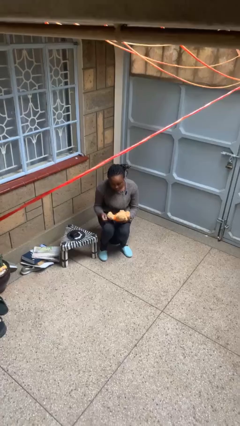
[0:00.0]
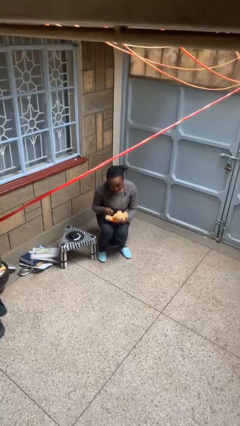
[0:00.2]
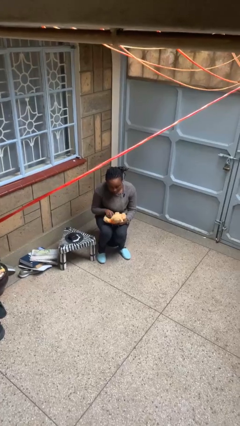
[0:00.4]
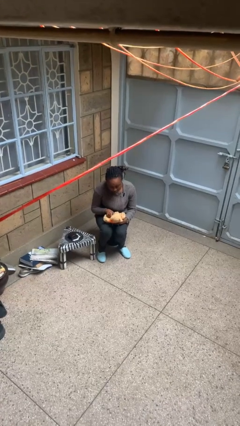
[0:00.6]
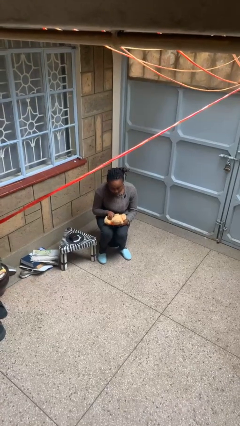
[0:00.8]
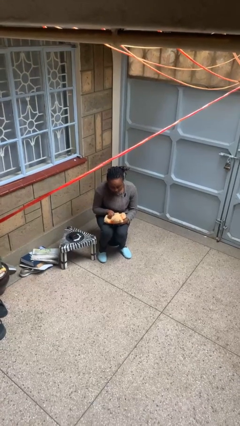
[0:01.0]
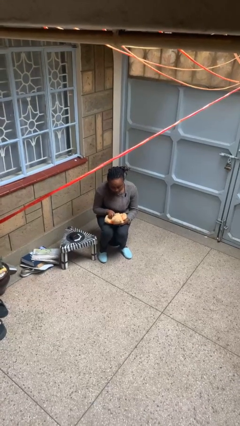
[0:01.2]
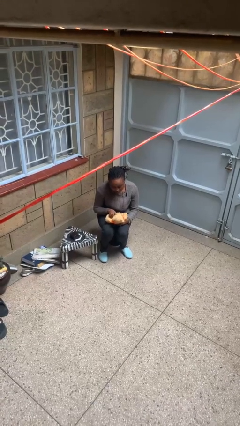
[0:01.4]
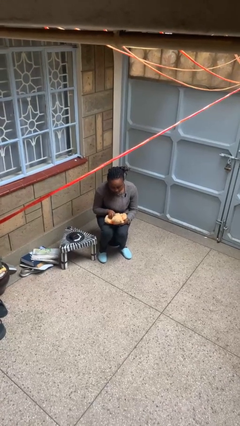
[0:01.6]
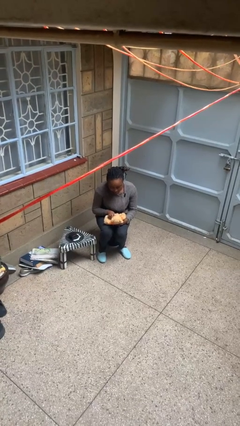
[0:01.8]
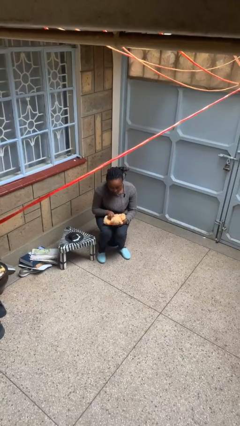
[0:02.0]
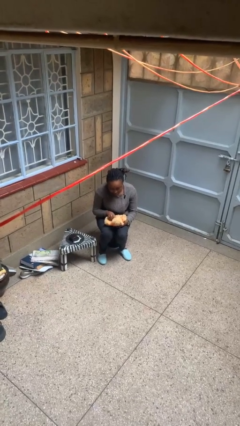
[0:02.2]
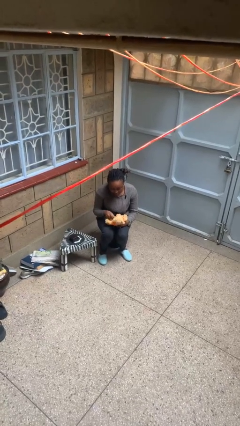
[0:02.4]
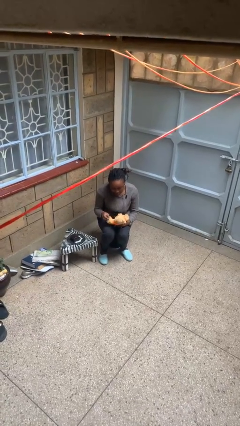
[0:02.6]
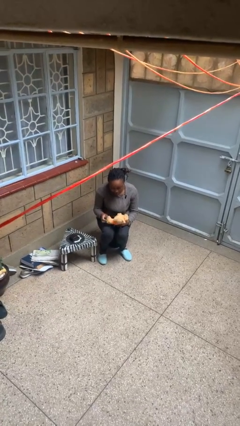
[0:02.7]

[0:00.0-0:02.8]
person squeezes object

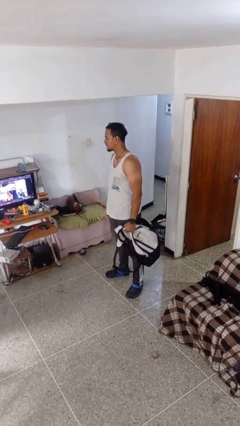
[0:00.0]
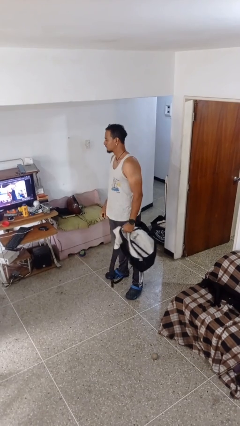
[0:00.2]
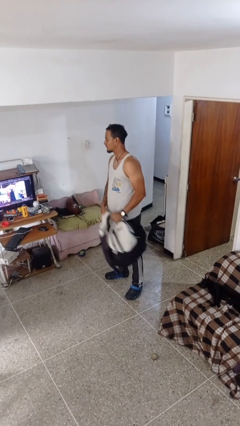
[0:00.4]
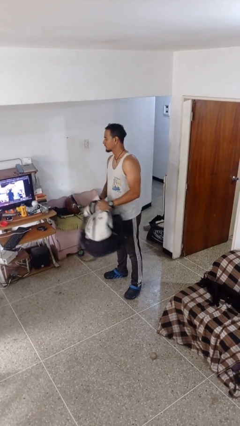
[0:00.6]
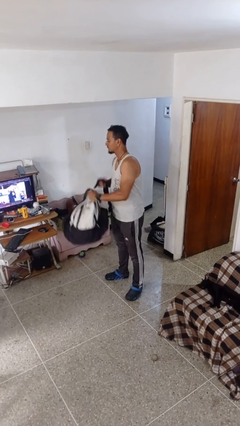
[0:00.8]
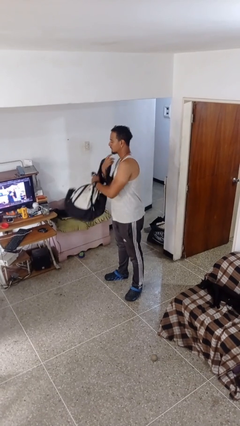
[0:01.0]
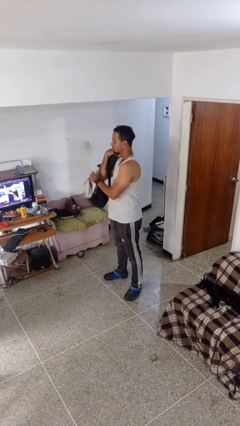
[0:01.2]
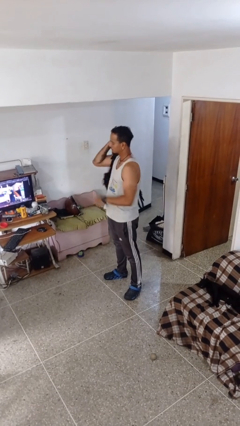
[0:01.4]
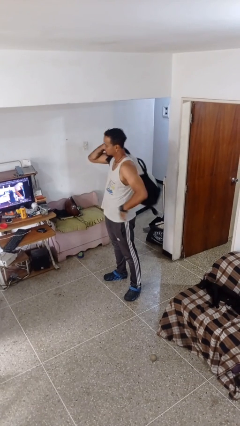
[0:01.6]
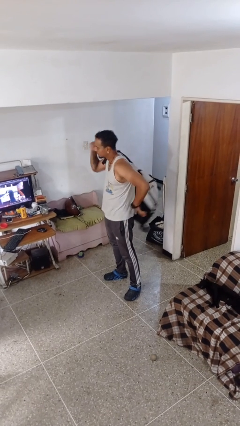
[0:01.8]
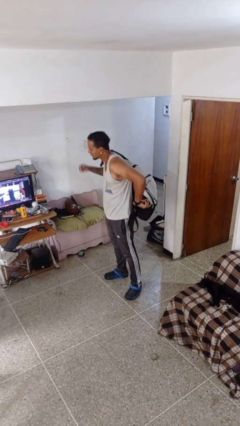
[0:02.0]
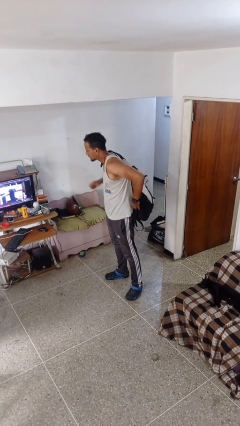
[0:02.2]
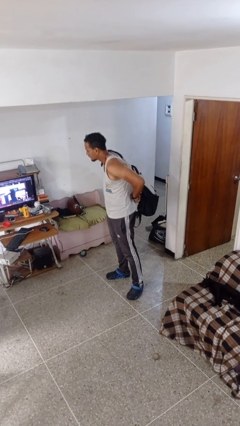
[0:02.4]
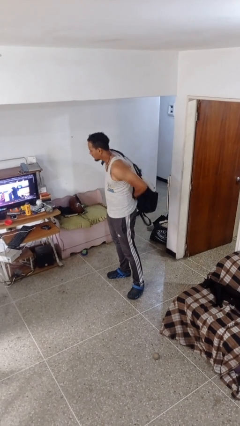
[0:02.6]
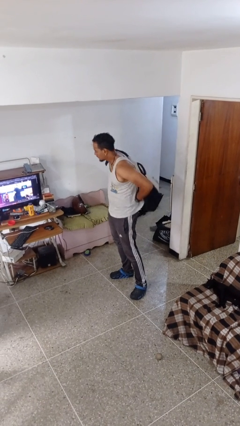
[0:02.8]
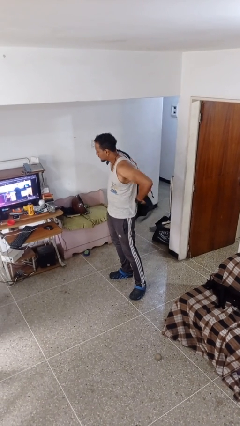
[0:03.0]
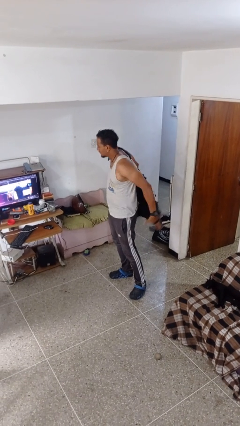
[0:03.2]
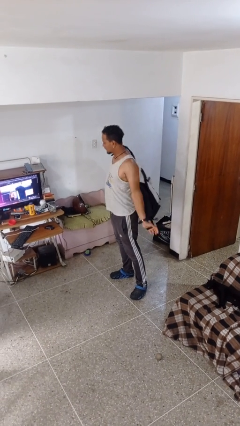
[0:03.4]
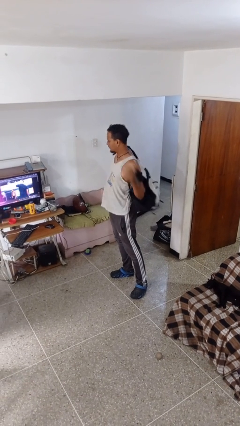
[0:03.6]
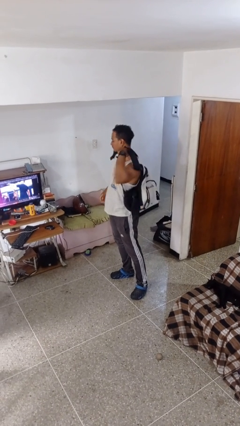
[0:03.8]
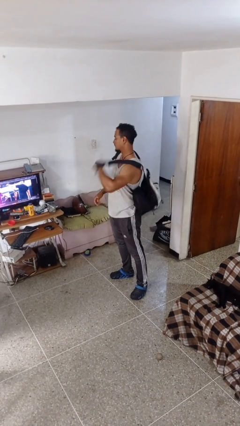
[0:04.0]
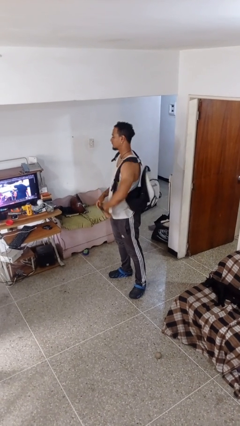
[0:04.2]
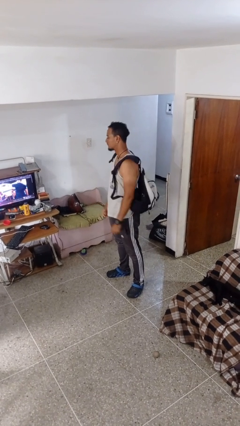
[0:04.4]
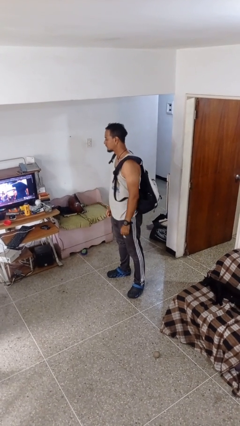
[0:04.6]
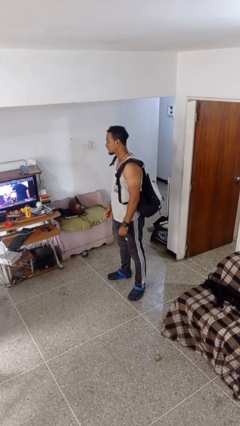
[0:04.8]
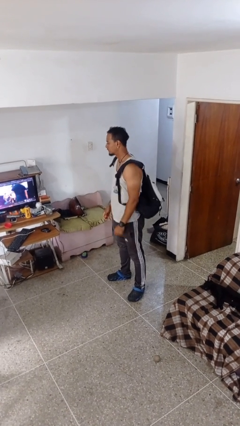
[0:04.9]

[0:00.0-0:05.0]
person puts on backpack

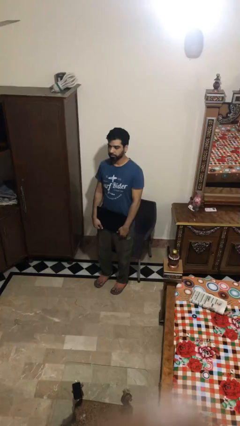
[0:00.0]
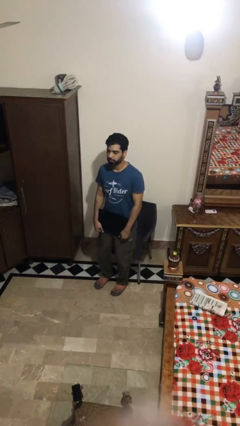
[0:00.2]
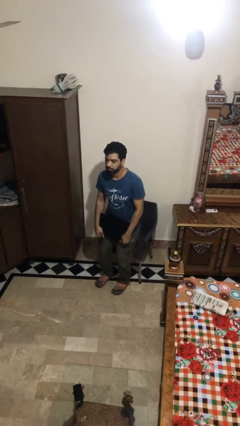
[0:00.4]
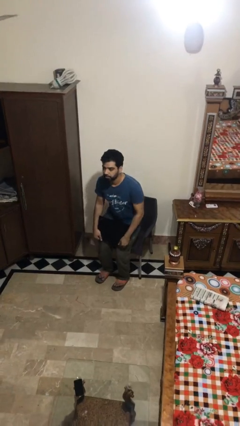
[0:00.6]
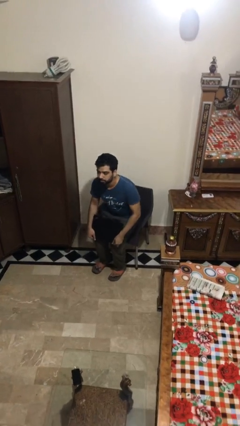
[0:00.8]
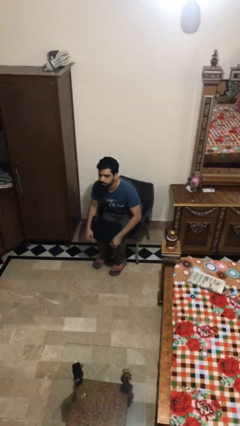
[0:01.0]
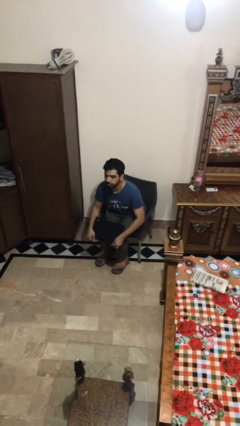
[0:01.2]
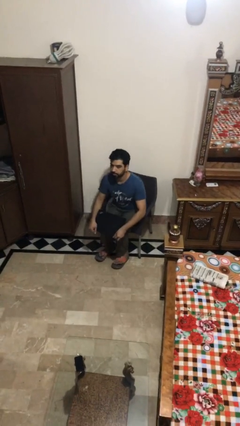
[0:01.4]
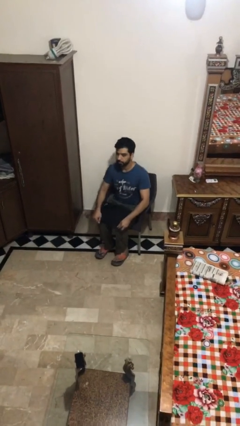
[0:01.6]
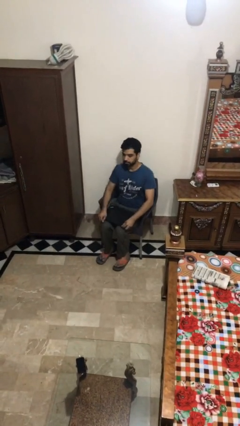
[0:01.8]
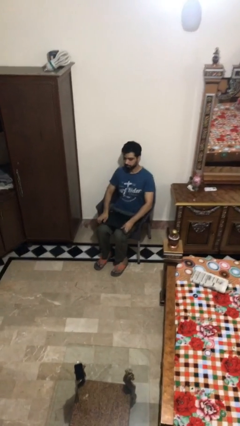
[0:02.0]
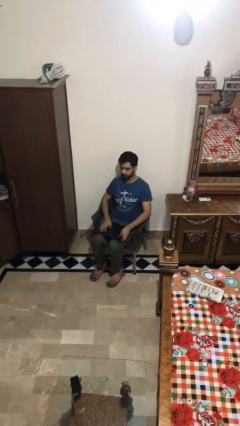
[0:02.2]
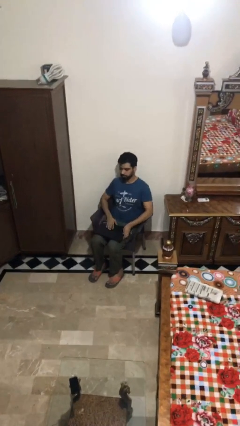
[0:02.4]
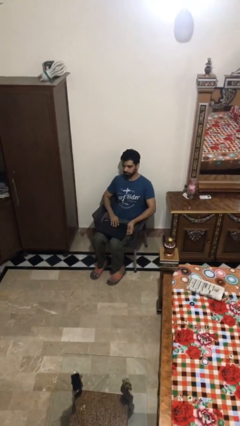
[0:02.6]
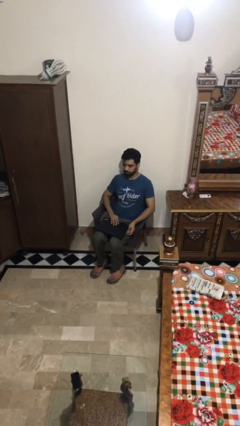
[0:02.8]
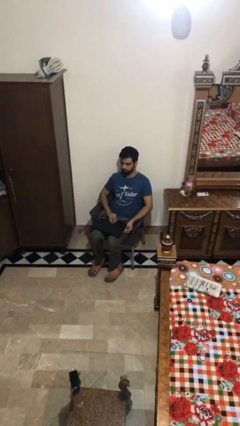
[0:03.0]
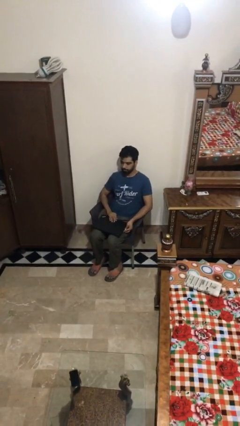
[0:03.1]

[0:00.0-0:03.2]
person sits down

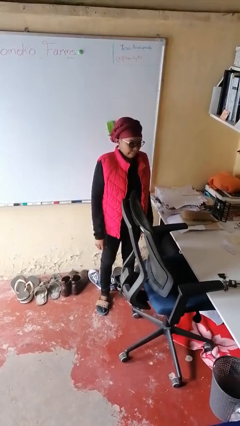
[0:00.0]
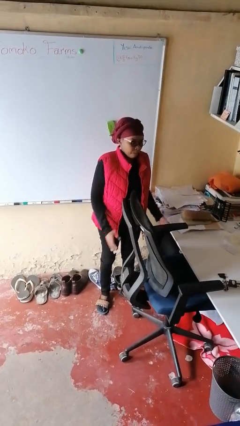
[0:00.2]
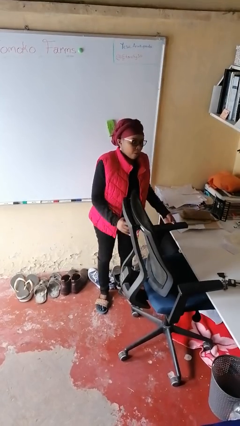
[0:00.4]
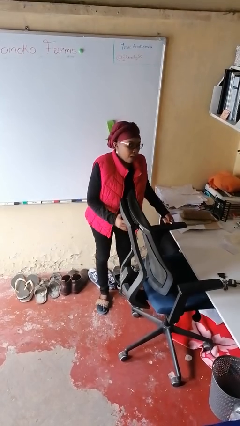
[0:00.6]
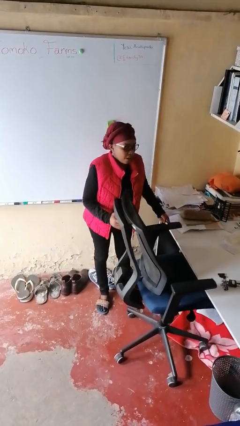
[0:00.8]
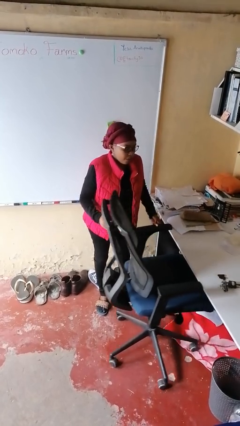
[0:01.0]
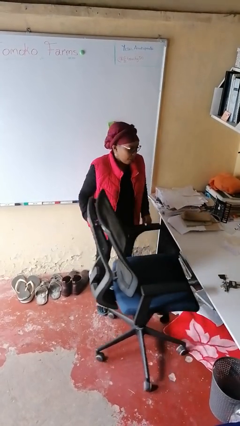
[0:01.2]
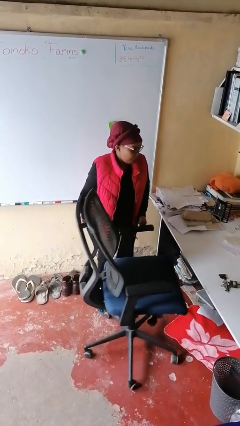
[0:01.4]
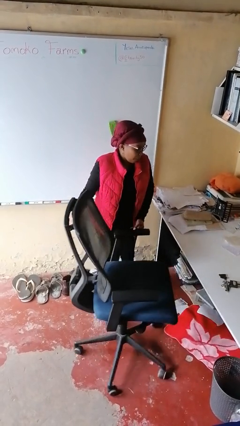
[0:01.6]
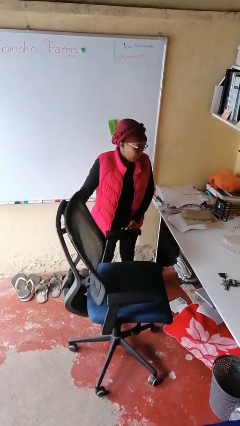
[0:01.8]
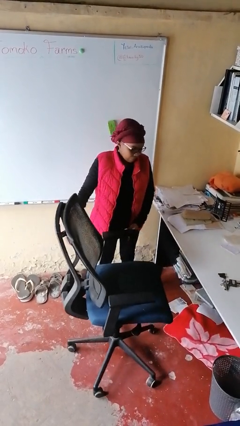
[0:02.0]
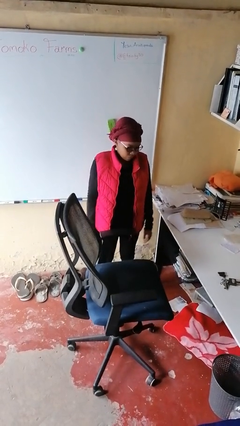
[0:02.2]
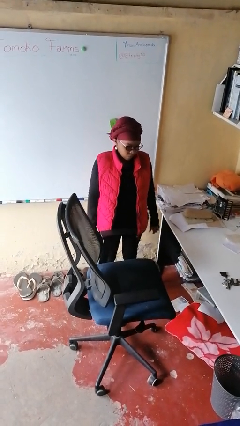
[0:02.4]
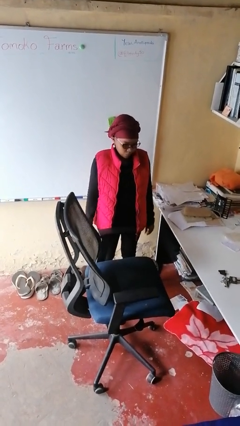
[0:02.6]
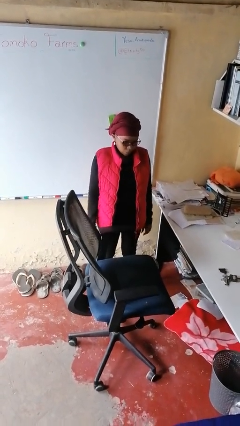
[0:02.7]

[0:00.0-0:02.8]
person pulls out chair

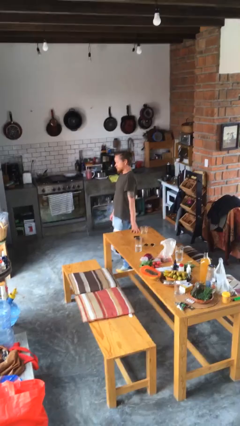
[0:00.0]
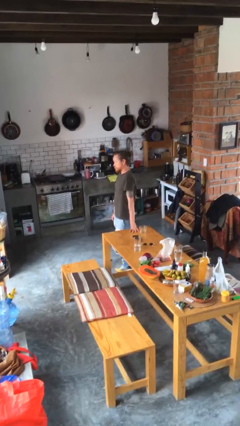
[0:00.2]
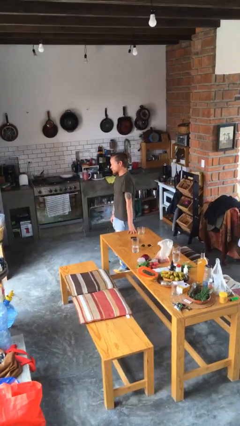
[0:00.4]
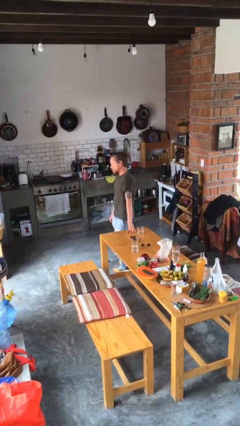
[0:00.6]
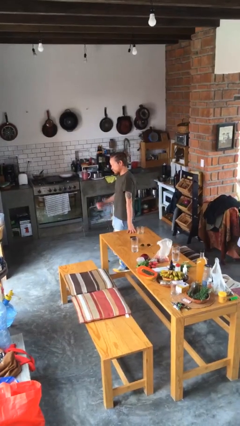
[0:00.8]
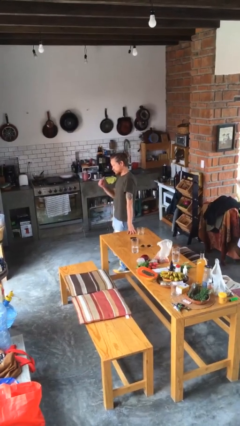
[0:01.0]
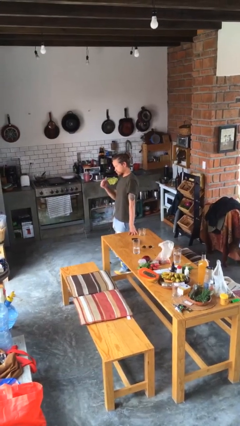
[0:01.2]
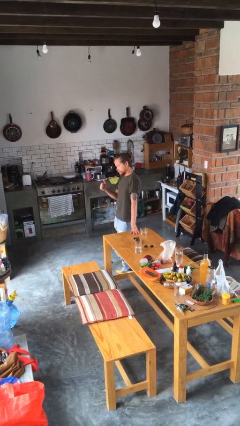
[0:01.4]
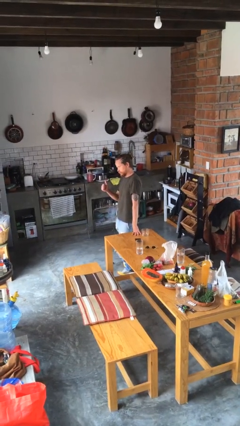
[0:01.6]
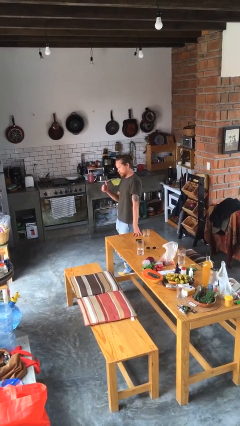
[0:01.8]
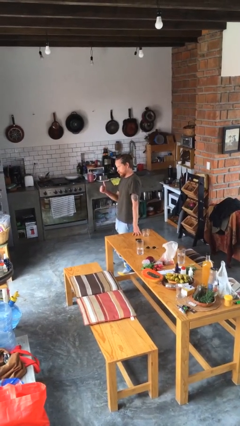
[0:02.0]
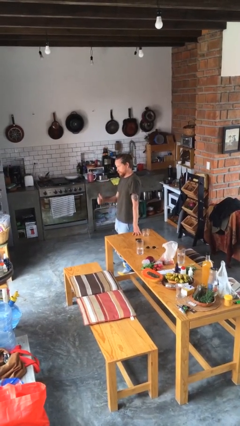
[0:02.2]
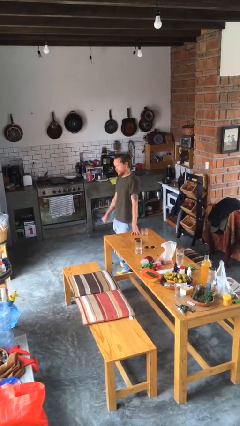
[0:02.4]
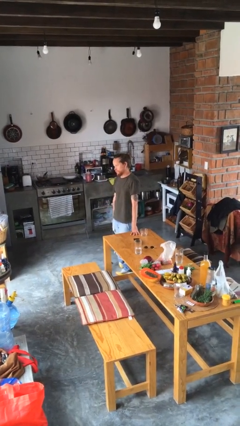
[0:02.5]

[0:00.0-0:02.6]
person gestures thumbs up

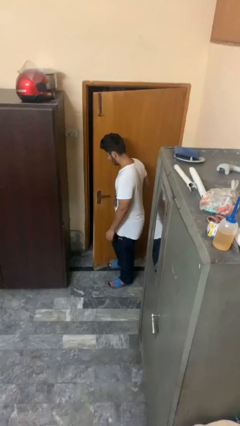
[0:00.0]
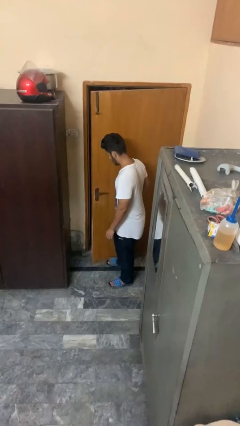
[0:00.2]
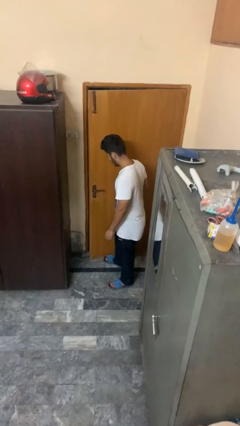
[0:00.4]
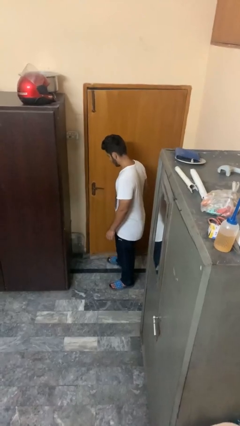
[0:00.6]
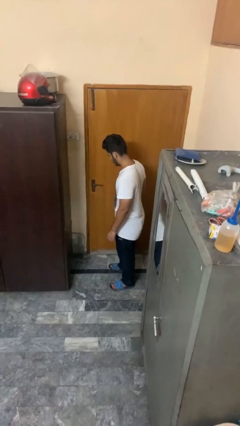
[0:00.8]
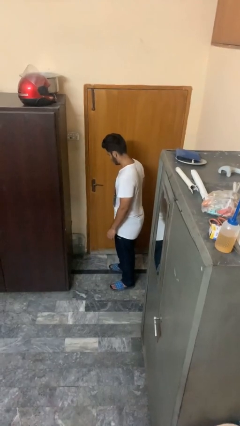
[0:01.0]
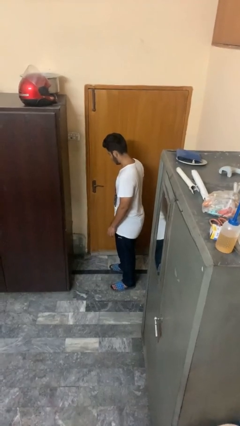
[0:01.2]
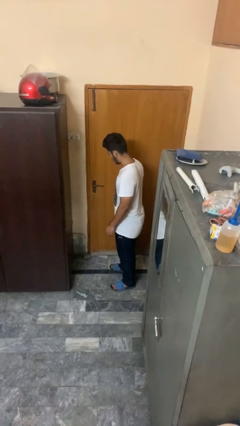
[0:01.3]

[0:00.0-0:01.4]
person closes door with foot
